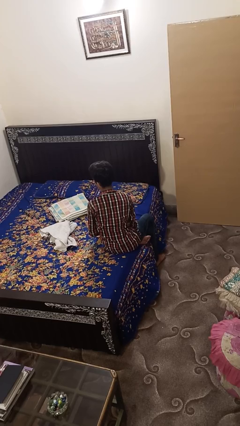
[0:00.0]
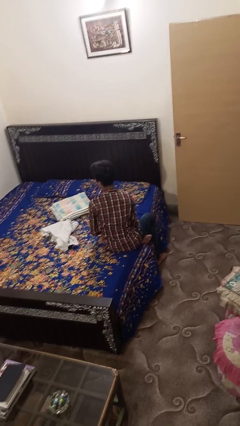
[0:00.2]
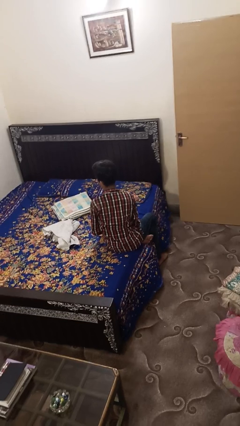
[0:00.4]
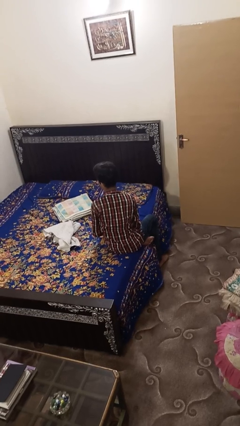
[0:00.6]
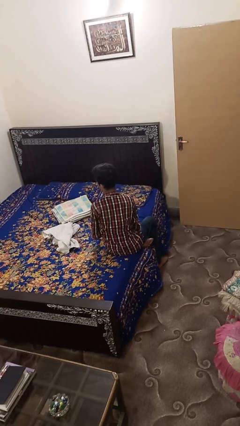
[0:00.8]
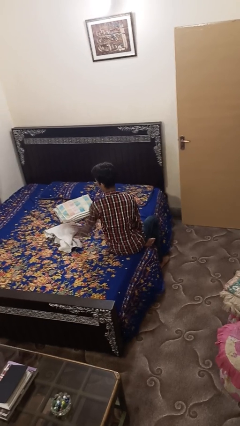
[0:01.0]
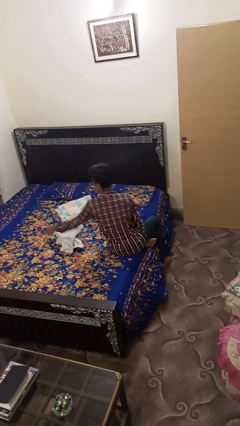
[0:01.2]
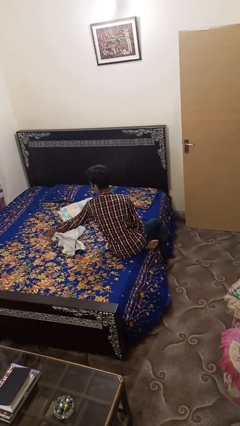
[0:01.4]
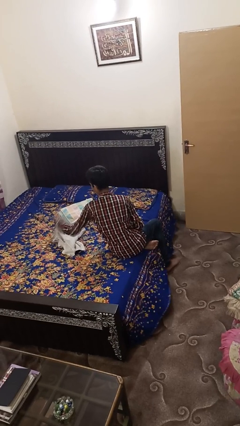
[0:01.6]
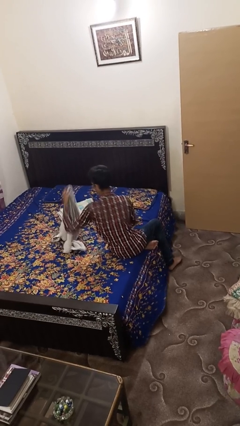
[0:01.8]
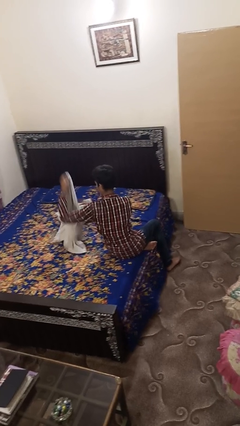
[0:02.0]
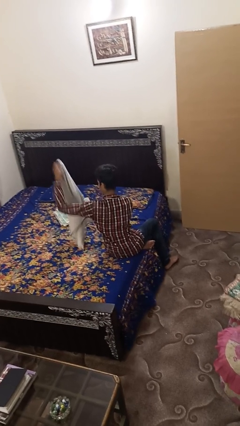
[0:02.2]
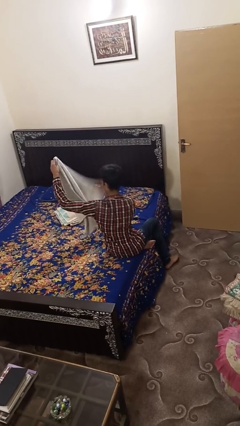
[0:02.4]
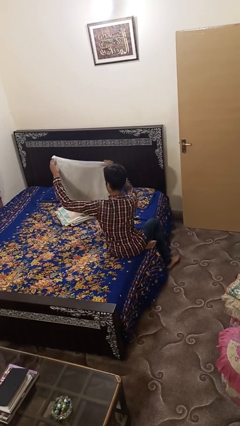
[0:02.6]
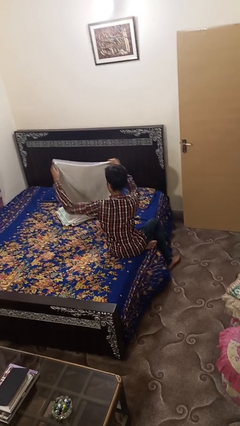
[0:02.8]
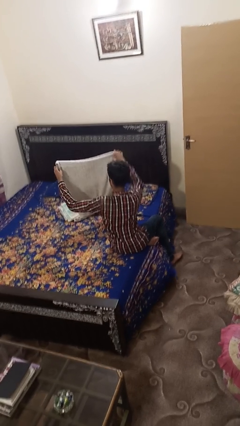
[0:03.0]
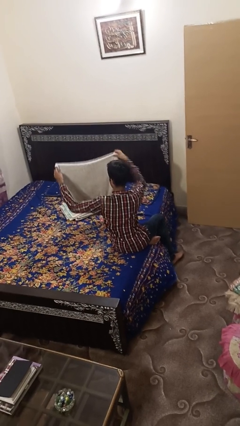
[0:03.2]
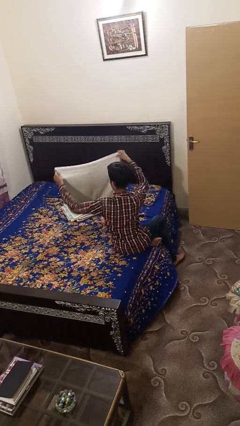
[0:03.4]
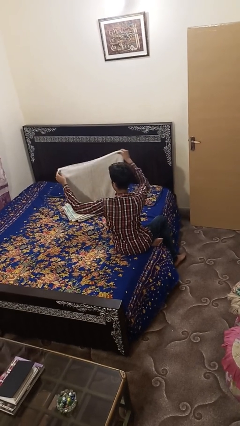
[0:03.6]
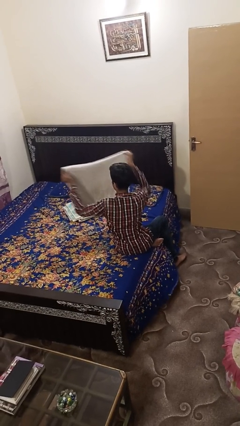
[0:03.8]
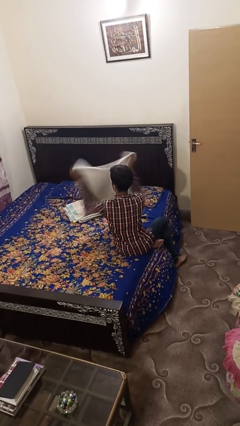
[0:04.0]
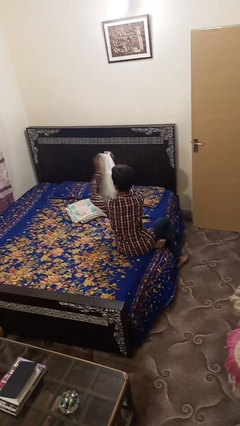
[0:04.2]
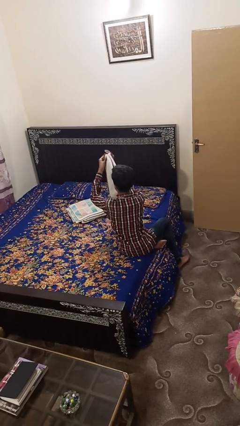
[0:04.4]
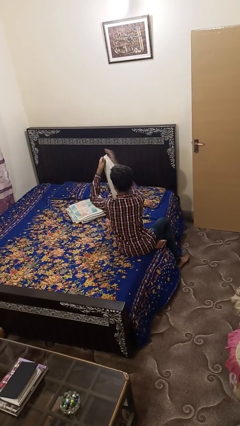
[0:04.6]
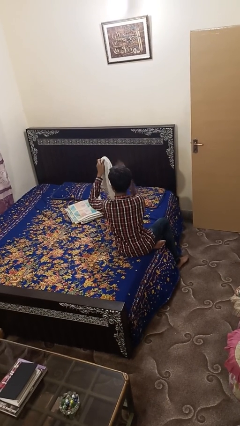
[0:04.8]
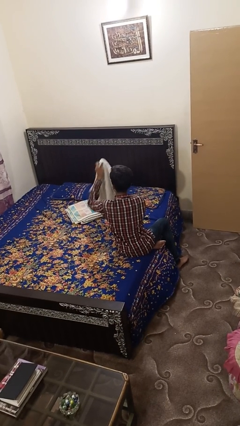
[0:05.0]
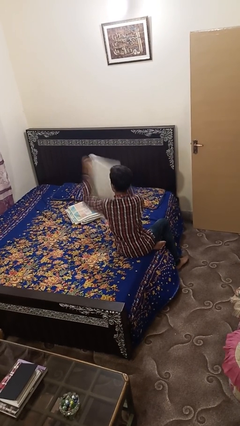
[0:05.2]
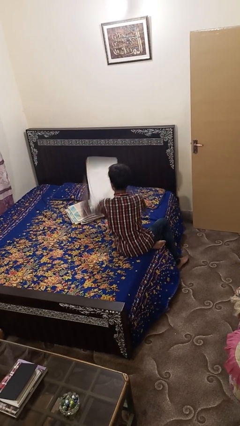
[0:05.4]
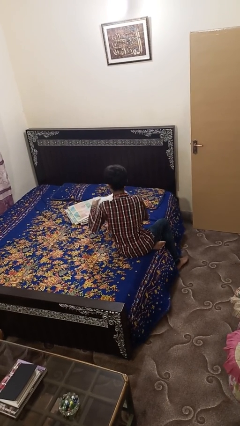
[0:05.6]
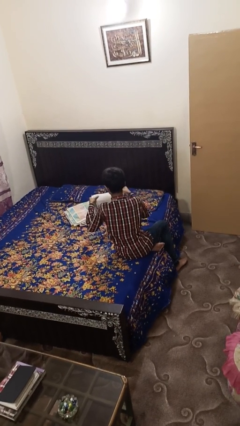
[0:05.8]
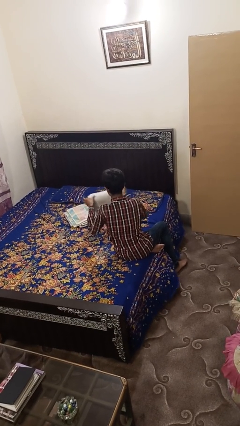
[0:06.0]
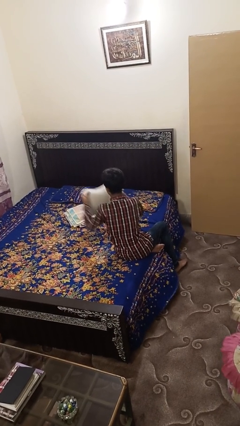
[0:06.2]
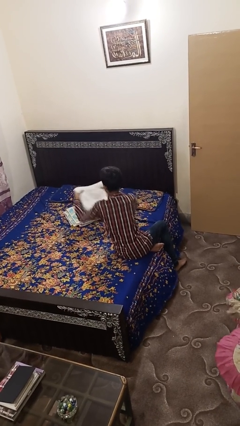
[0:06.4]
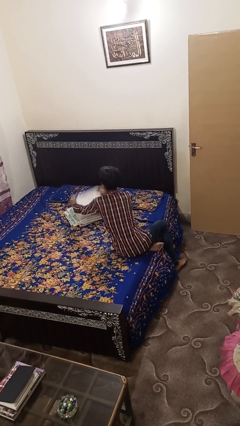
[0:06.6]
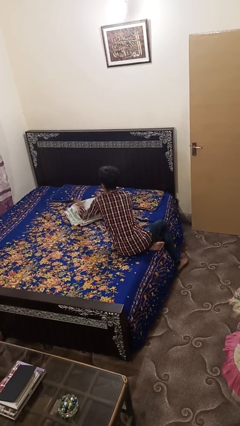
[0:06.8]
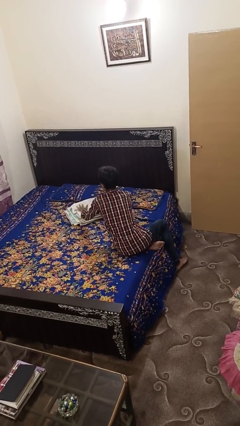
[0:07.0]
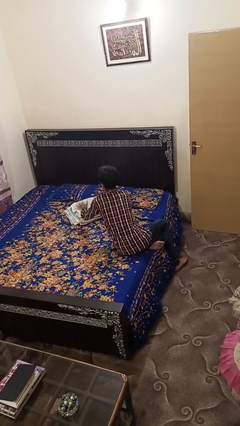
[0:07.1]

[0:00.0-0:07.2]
person folds towel

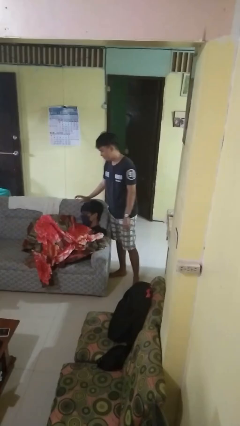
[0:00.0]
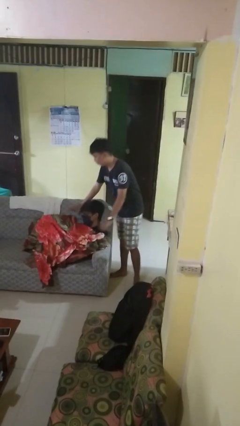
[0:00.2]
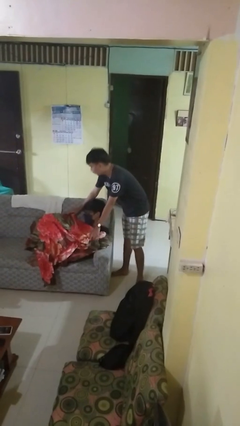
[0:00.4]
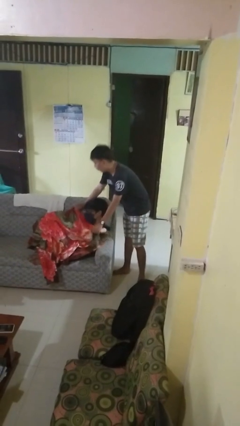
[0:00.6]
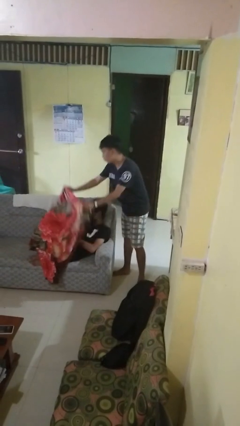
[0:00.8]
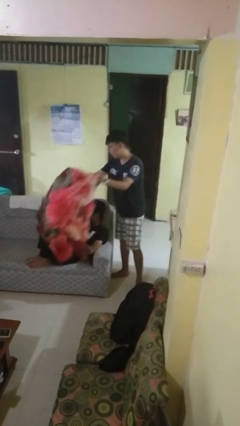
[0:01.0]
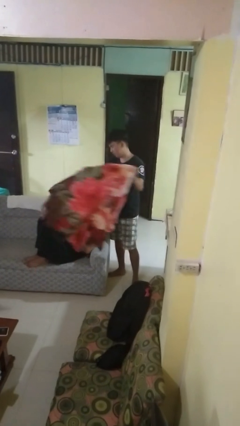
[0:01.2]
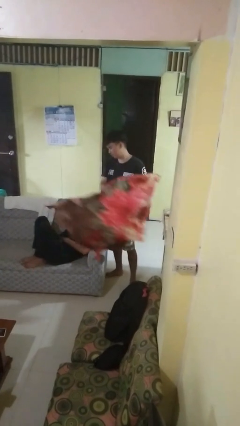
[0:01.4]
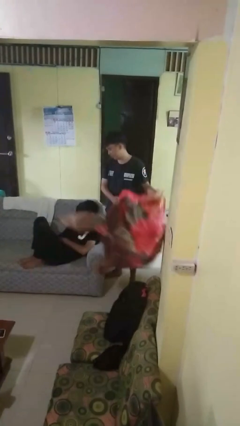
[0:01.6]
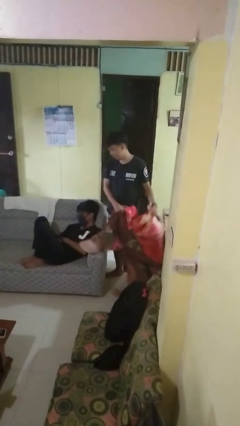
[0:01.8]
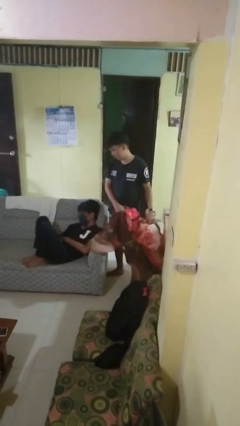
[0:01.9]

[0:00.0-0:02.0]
person uncovers friend with blanket

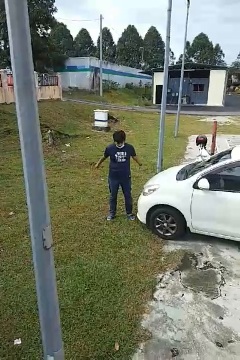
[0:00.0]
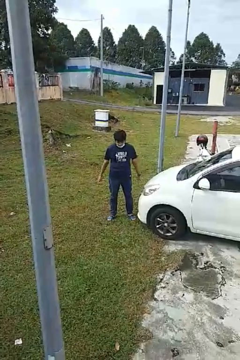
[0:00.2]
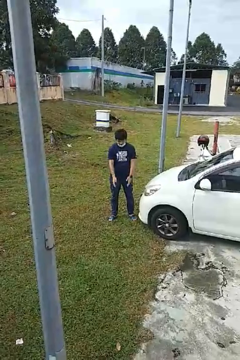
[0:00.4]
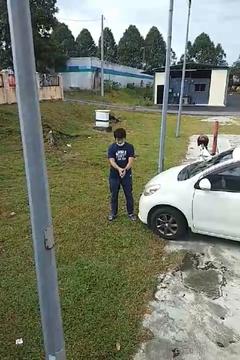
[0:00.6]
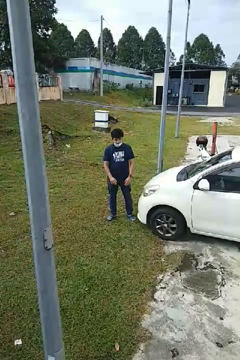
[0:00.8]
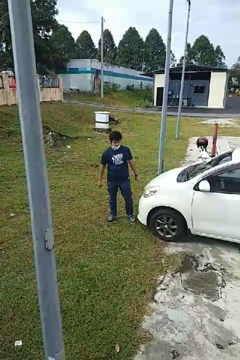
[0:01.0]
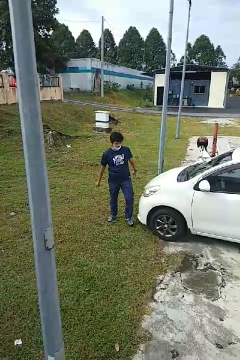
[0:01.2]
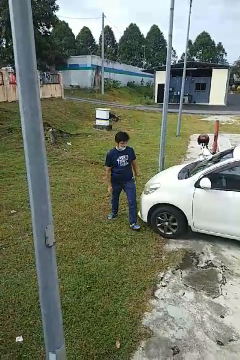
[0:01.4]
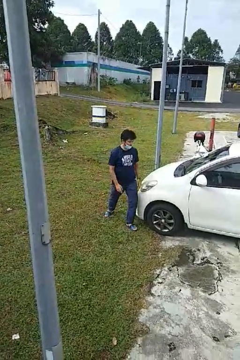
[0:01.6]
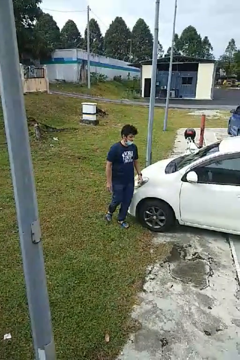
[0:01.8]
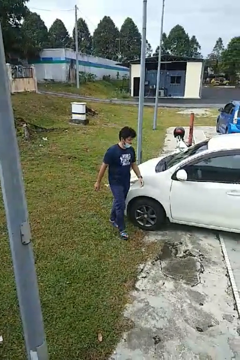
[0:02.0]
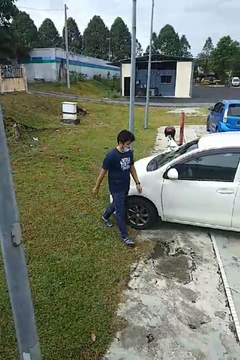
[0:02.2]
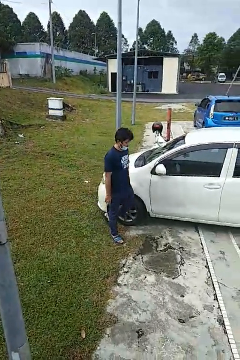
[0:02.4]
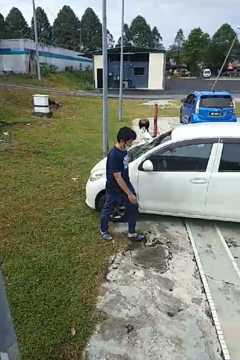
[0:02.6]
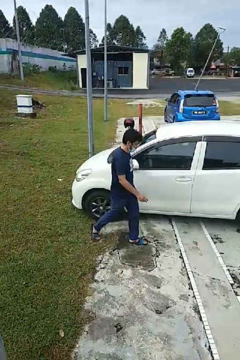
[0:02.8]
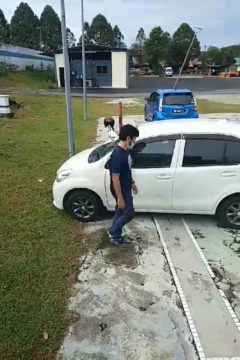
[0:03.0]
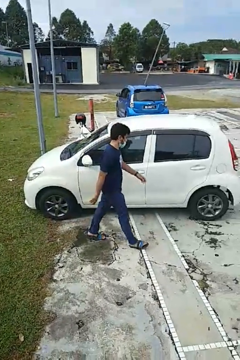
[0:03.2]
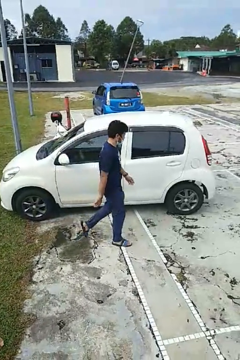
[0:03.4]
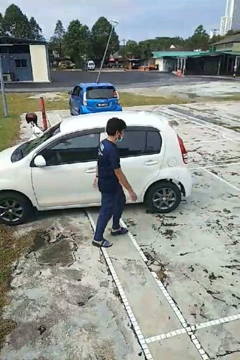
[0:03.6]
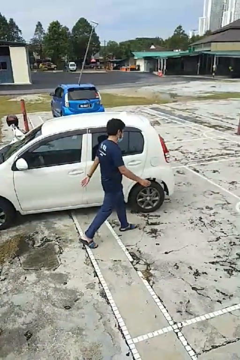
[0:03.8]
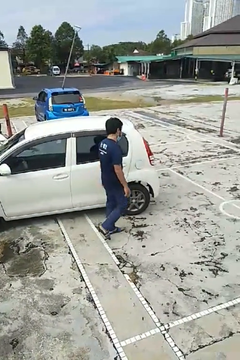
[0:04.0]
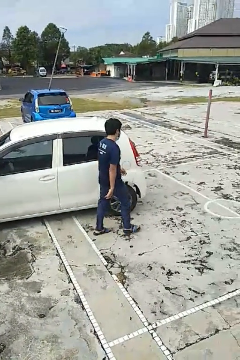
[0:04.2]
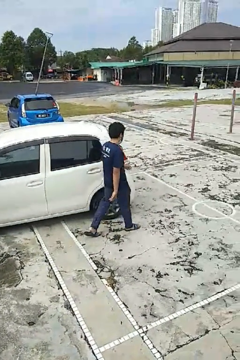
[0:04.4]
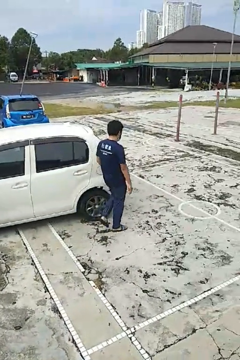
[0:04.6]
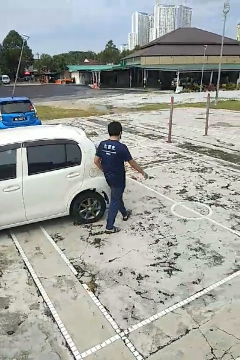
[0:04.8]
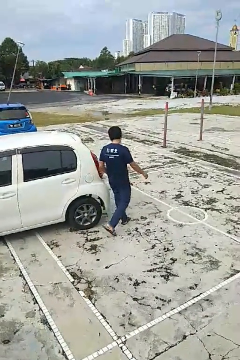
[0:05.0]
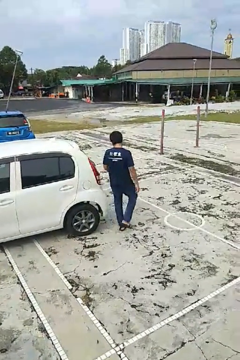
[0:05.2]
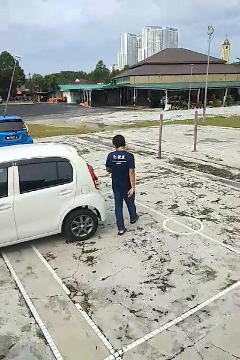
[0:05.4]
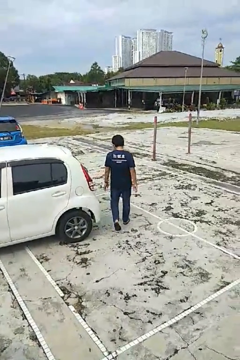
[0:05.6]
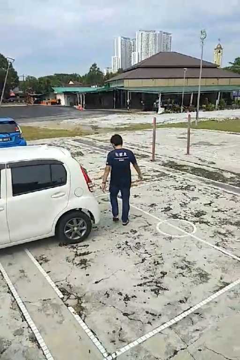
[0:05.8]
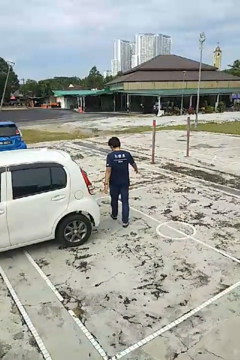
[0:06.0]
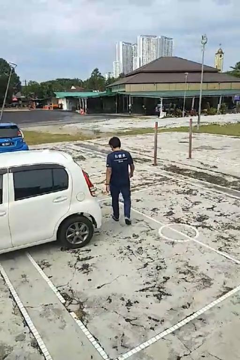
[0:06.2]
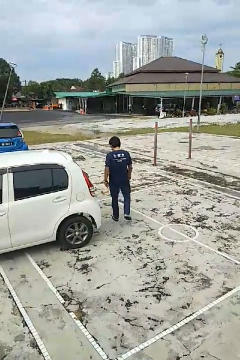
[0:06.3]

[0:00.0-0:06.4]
person walks around car

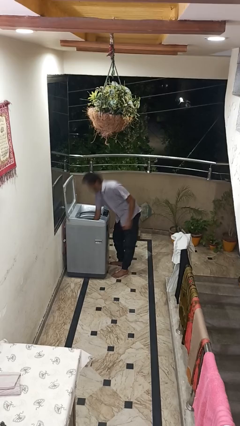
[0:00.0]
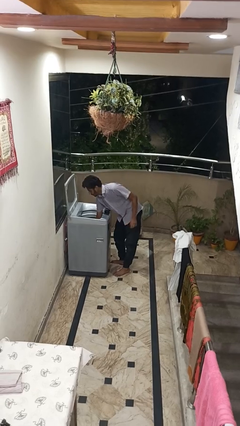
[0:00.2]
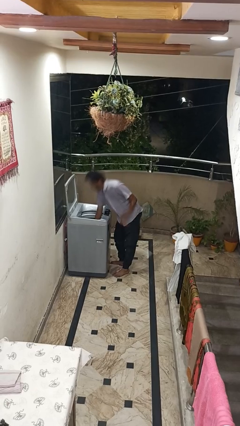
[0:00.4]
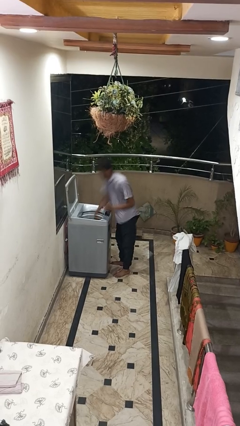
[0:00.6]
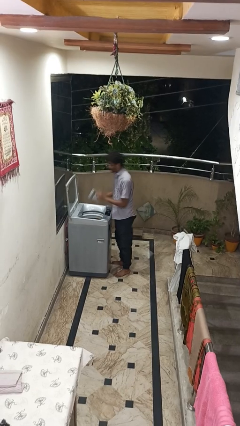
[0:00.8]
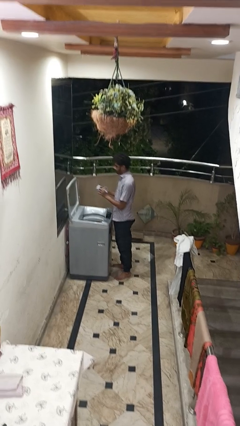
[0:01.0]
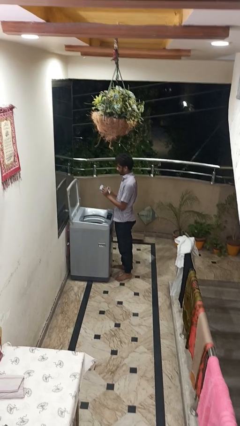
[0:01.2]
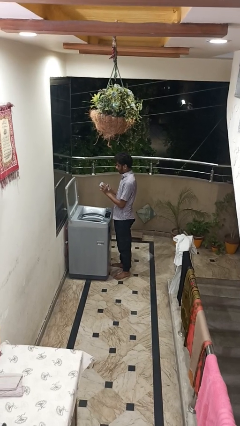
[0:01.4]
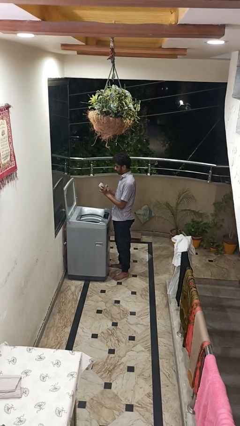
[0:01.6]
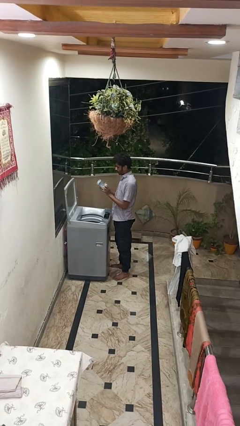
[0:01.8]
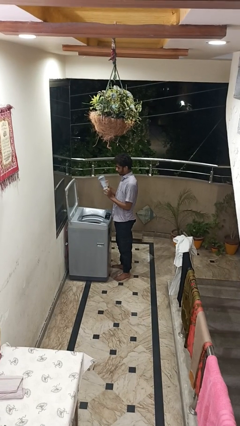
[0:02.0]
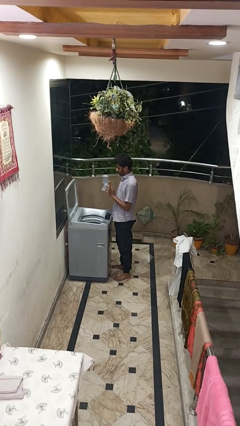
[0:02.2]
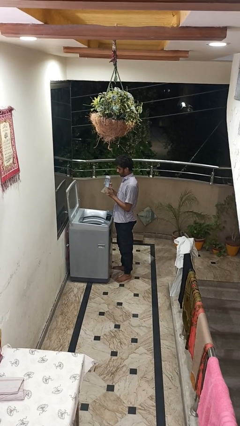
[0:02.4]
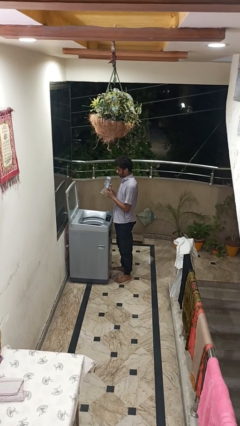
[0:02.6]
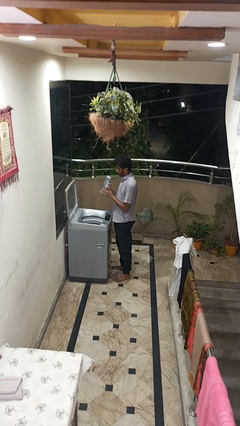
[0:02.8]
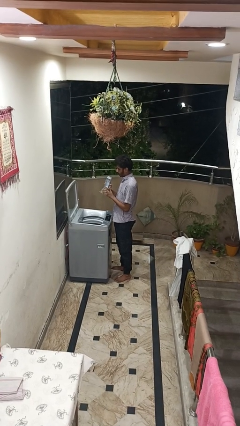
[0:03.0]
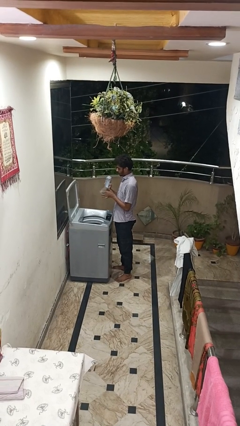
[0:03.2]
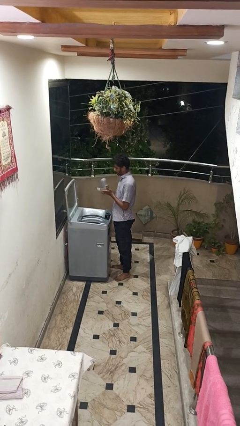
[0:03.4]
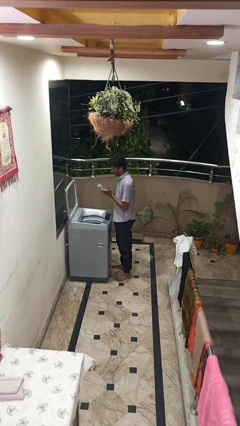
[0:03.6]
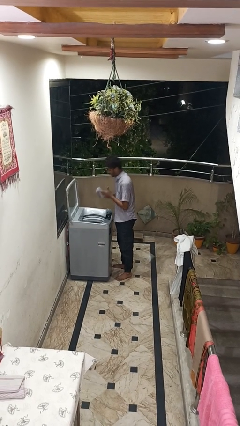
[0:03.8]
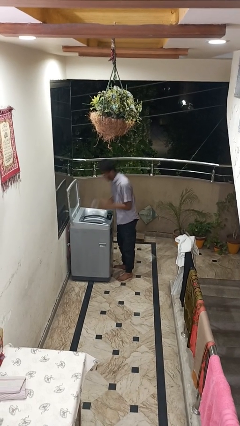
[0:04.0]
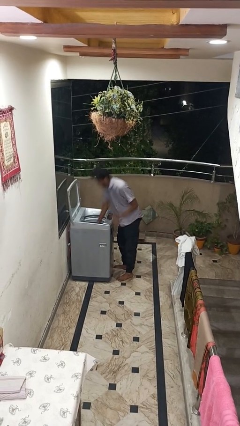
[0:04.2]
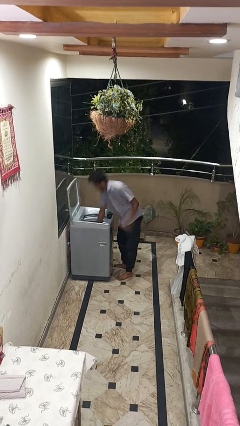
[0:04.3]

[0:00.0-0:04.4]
person cleans dryer lint trap
